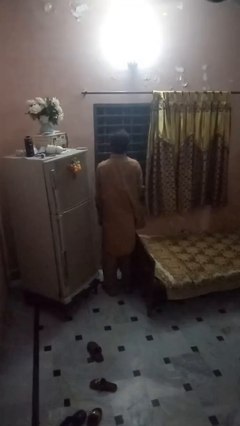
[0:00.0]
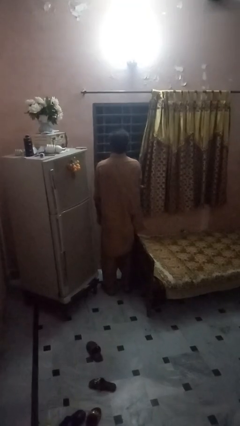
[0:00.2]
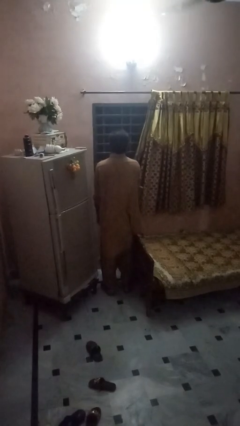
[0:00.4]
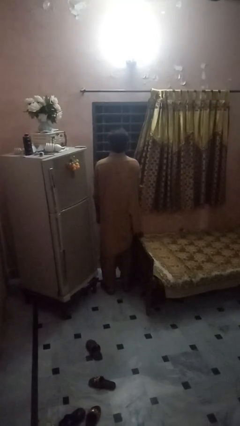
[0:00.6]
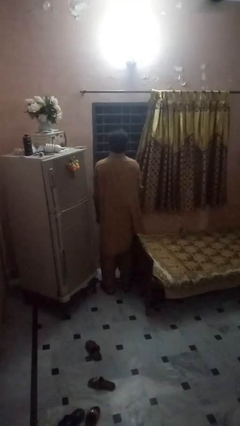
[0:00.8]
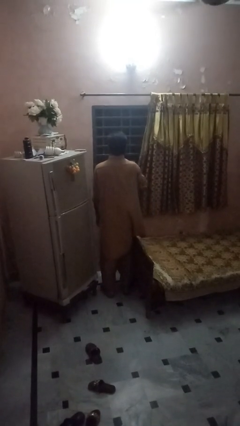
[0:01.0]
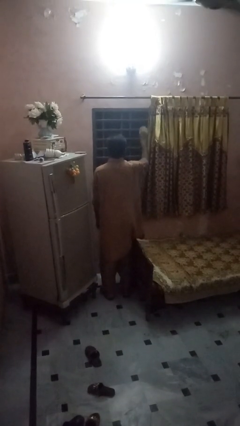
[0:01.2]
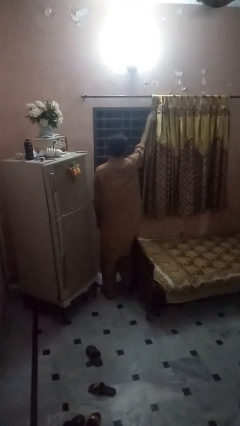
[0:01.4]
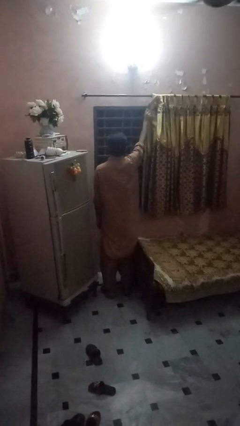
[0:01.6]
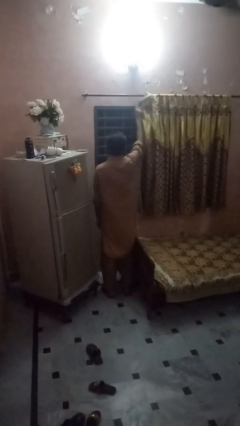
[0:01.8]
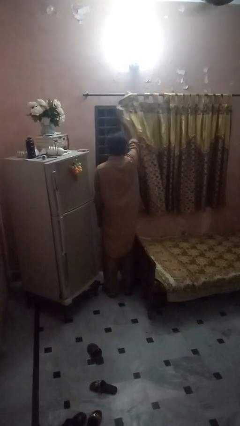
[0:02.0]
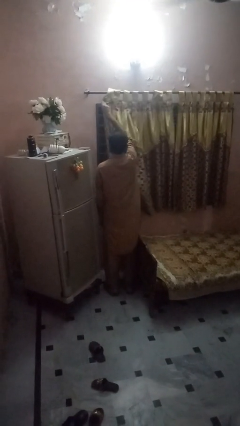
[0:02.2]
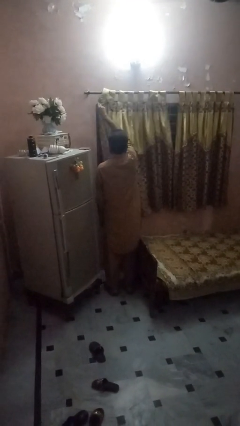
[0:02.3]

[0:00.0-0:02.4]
person closes curtains

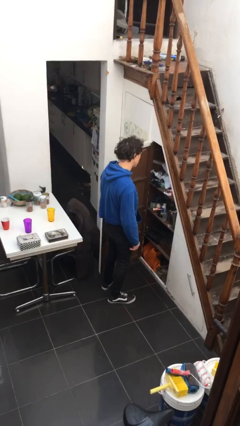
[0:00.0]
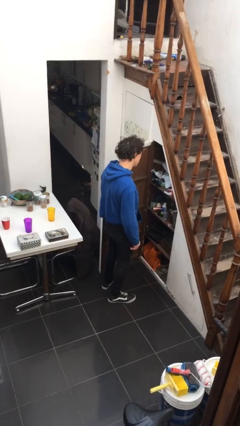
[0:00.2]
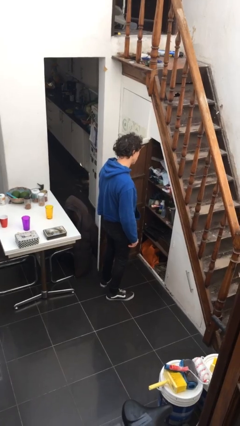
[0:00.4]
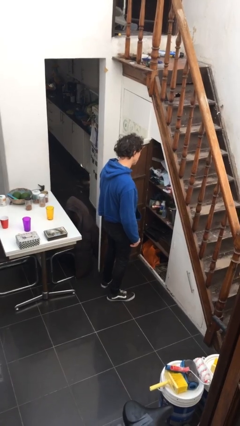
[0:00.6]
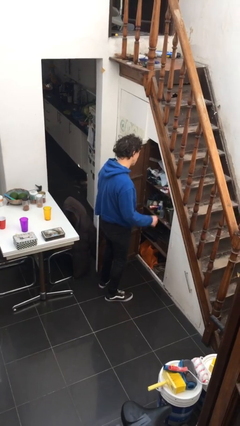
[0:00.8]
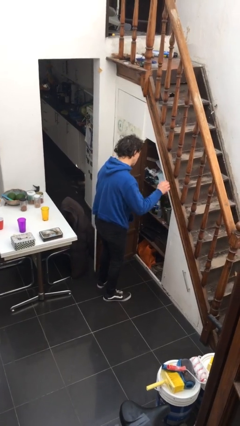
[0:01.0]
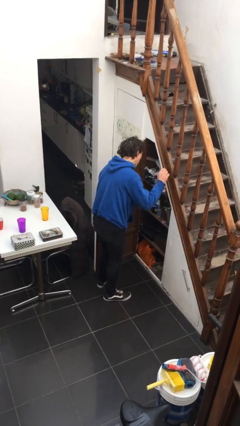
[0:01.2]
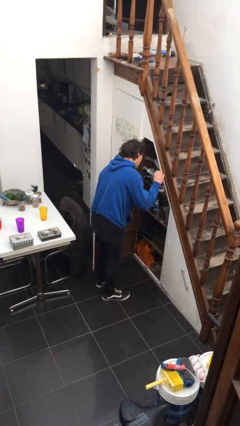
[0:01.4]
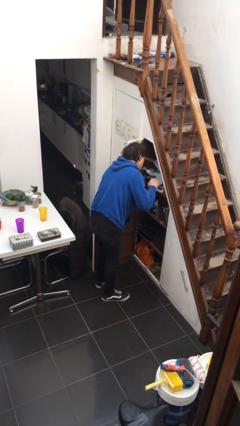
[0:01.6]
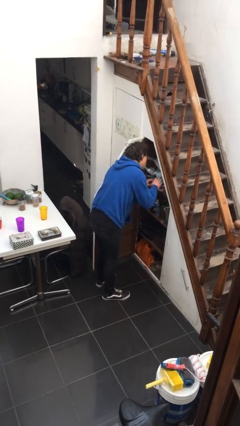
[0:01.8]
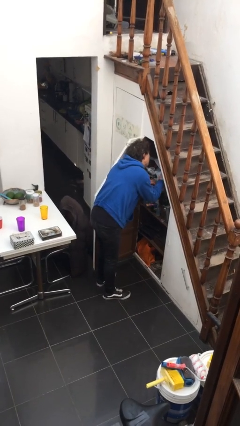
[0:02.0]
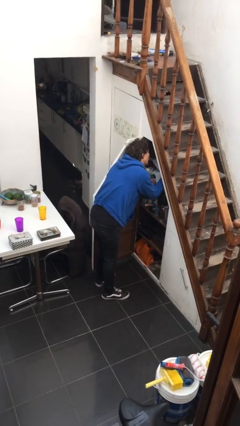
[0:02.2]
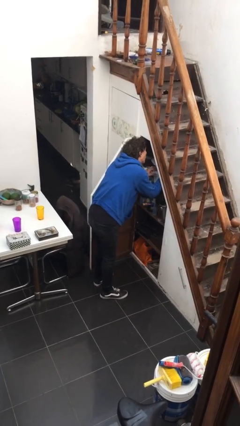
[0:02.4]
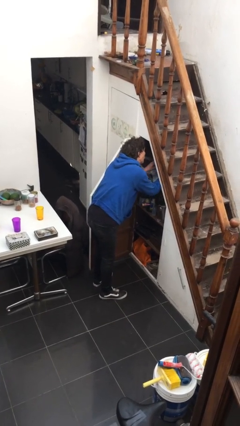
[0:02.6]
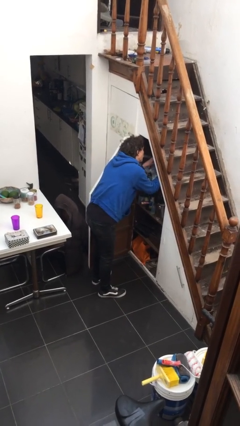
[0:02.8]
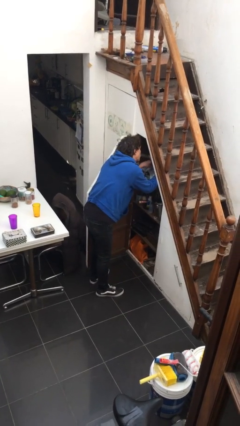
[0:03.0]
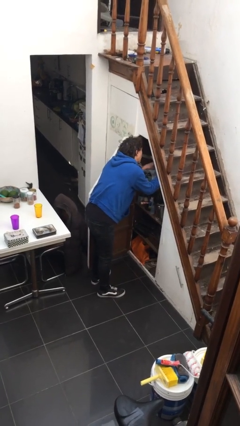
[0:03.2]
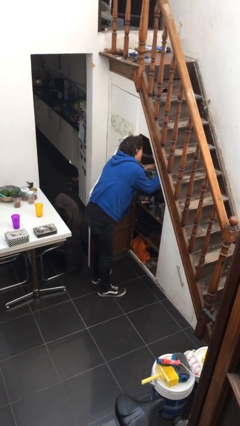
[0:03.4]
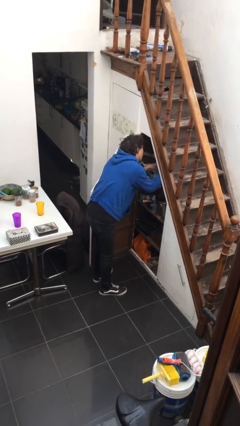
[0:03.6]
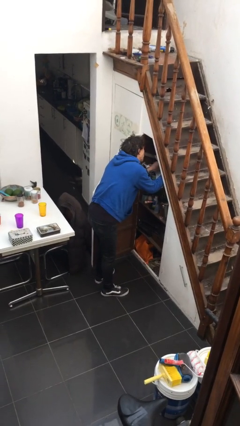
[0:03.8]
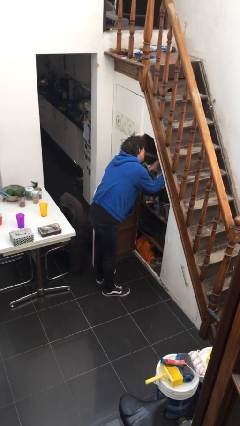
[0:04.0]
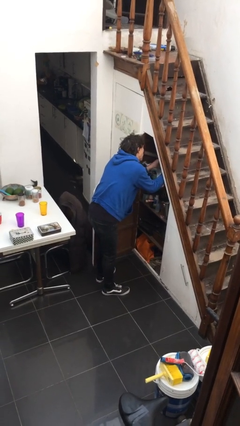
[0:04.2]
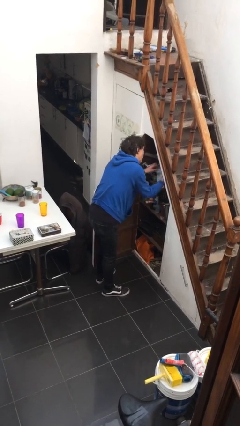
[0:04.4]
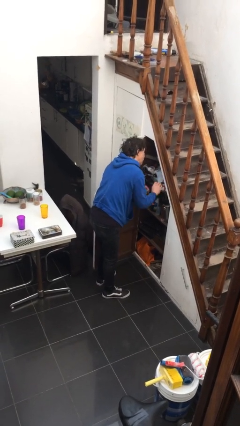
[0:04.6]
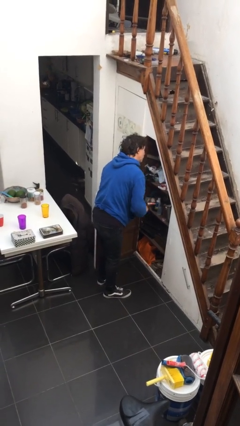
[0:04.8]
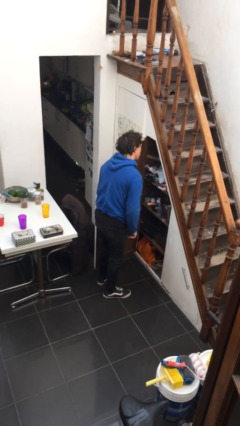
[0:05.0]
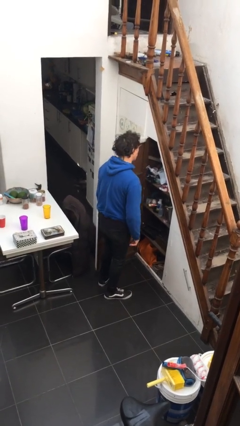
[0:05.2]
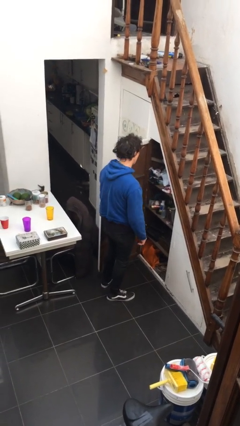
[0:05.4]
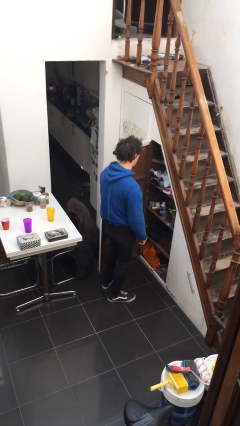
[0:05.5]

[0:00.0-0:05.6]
person searches in cabinet

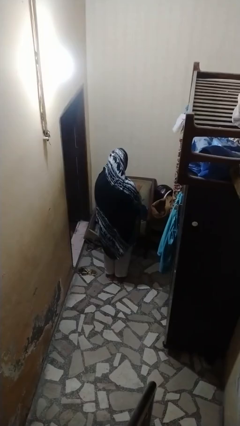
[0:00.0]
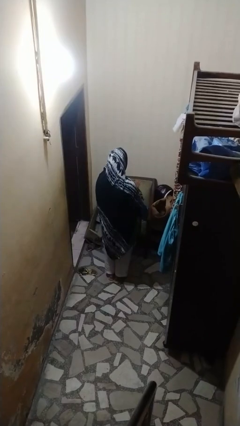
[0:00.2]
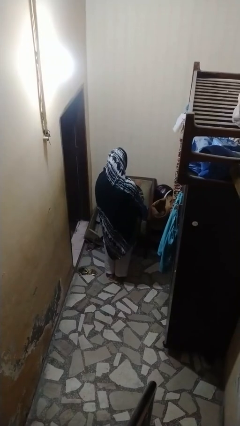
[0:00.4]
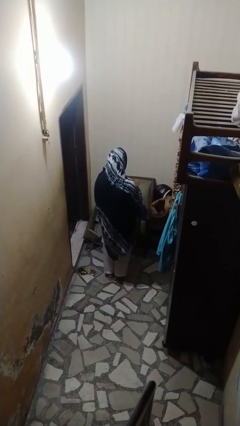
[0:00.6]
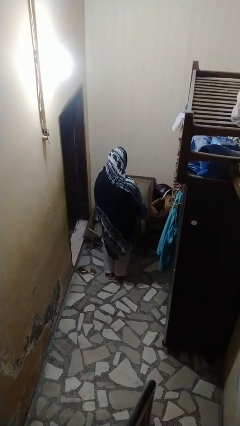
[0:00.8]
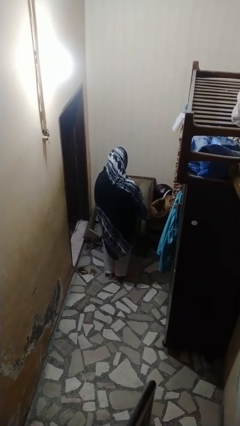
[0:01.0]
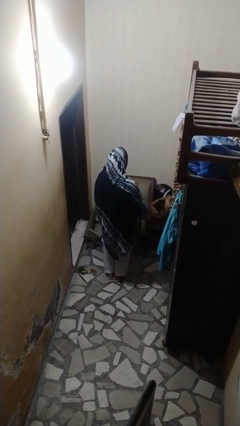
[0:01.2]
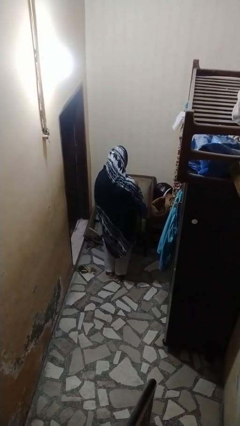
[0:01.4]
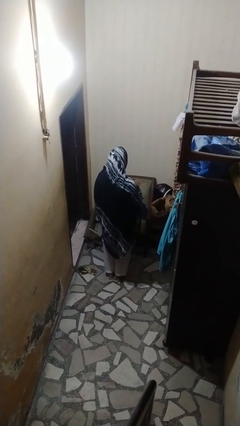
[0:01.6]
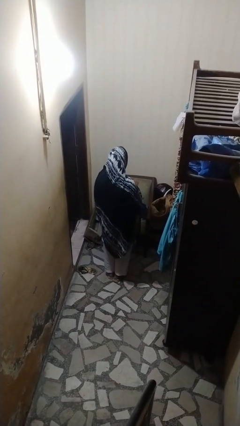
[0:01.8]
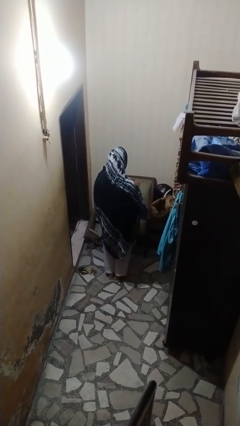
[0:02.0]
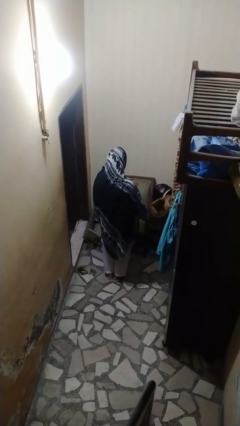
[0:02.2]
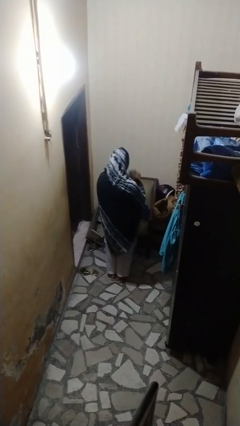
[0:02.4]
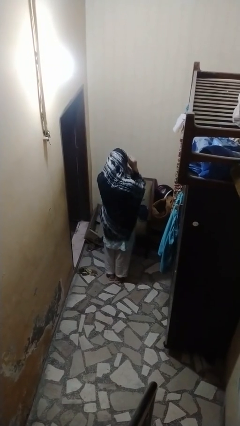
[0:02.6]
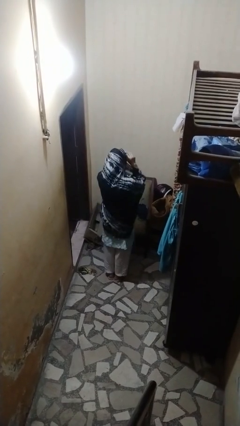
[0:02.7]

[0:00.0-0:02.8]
person stirs mug

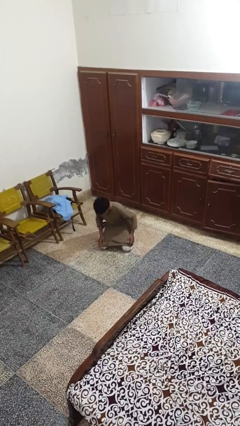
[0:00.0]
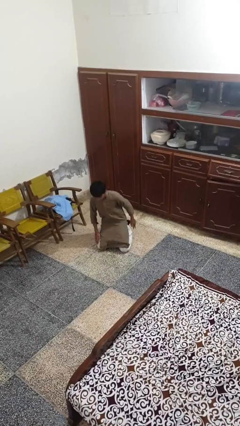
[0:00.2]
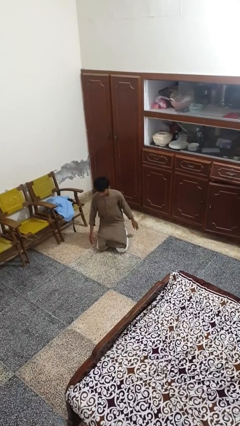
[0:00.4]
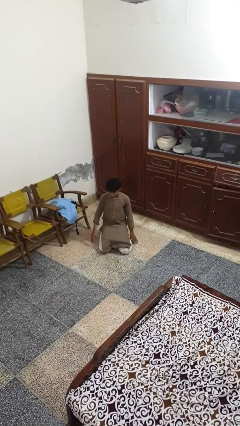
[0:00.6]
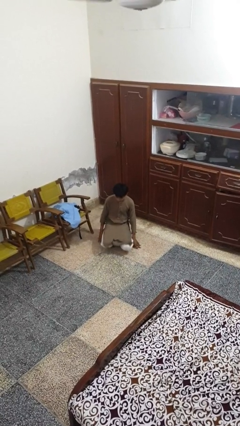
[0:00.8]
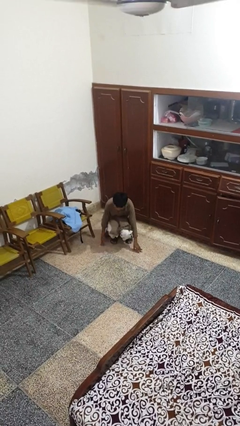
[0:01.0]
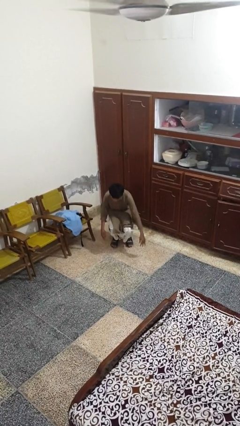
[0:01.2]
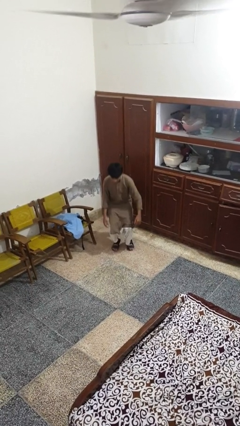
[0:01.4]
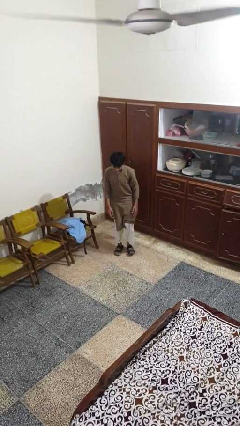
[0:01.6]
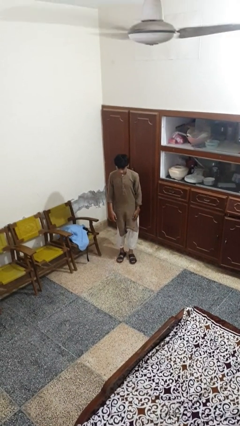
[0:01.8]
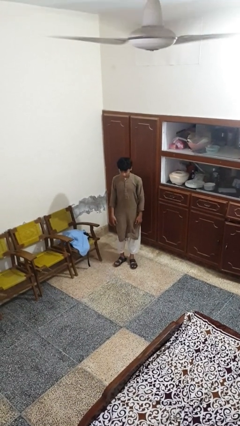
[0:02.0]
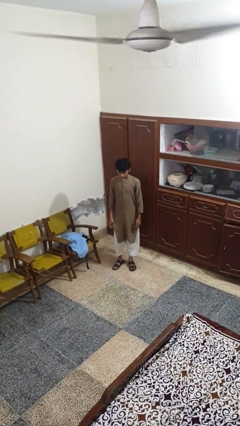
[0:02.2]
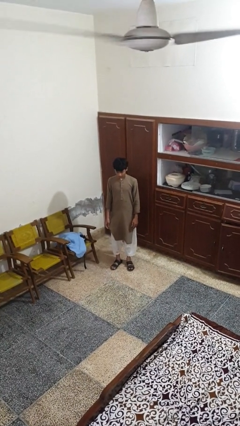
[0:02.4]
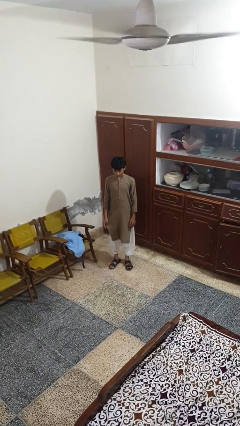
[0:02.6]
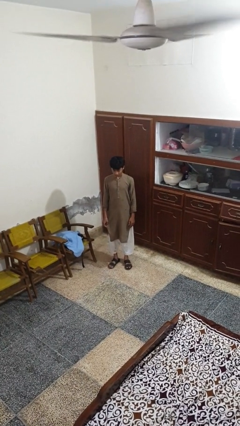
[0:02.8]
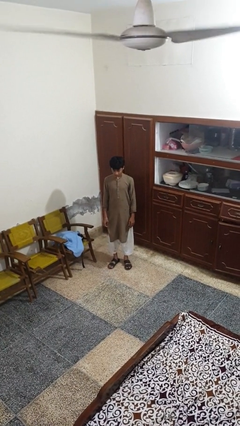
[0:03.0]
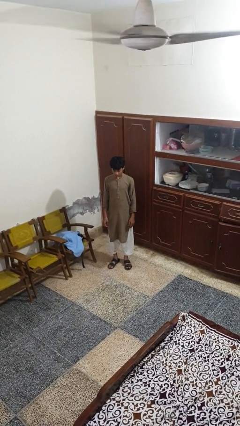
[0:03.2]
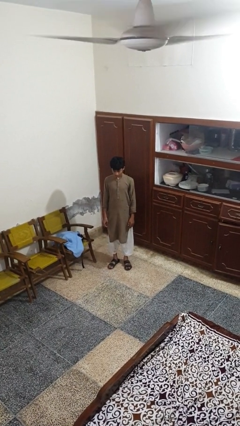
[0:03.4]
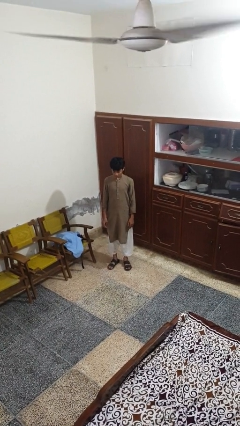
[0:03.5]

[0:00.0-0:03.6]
person stands up from floor

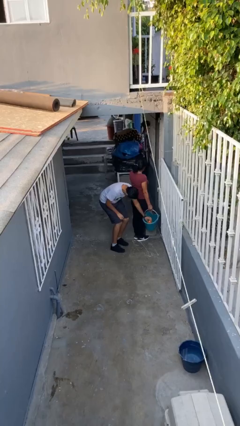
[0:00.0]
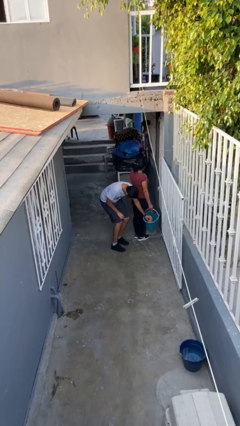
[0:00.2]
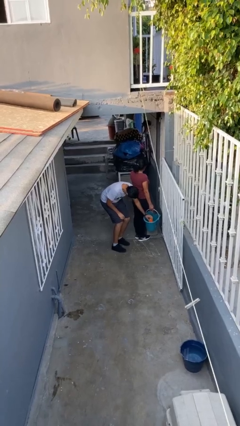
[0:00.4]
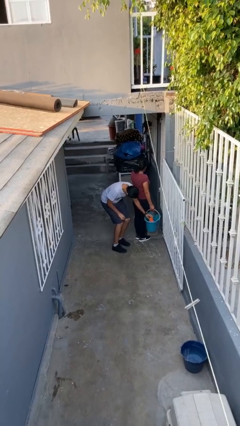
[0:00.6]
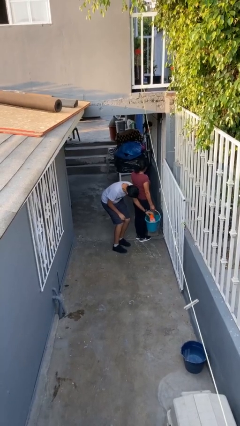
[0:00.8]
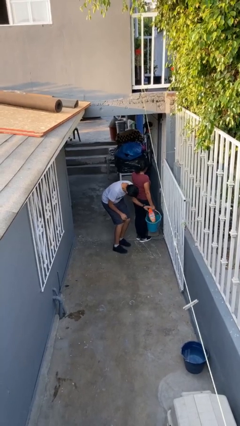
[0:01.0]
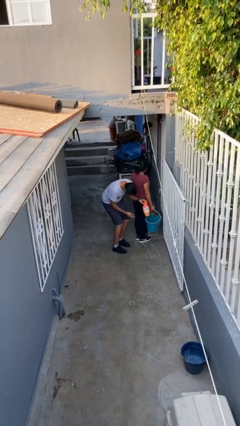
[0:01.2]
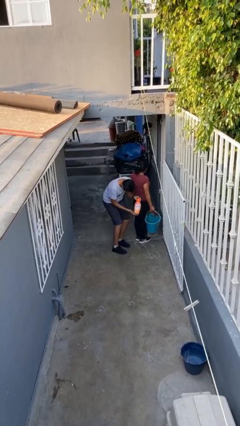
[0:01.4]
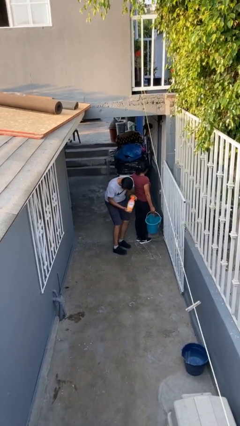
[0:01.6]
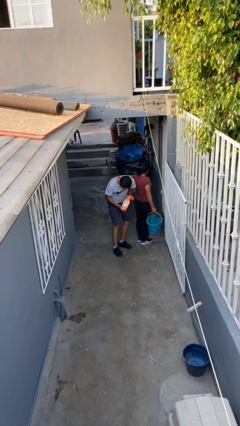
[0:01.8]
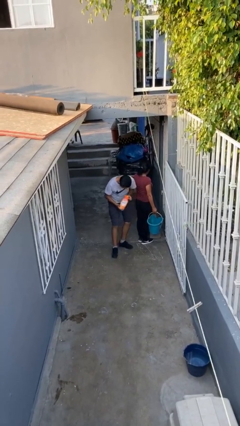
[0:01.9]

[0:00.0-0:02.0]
person steals object from person

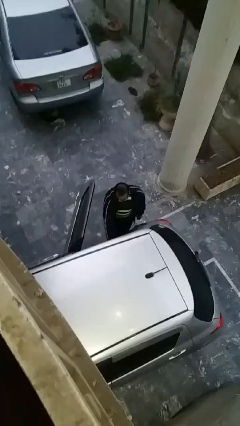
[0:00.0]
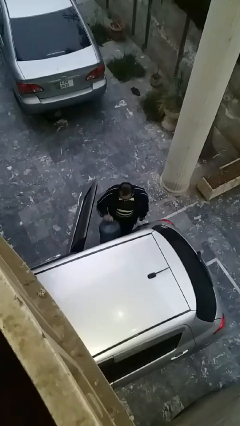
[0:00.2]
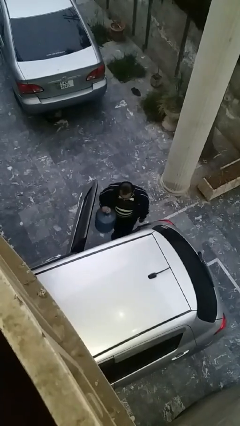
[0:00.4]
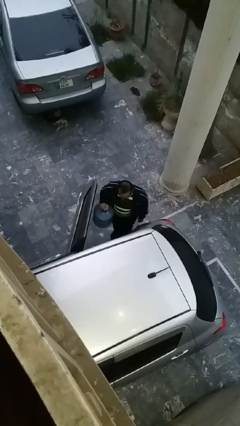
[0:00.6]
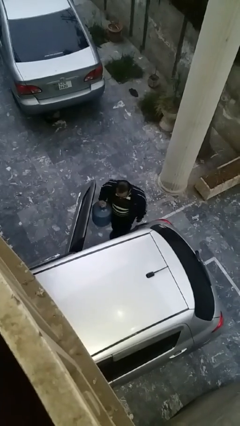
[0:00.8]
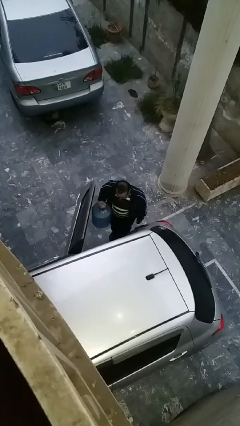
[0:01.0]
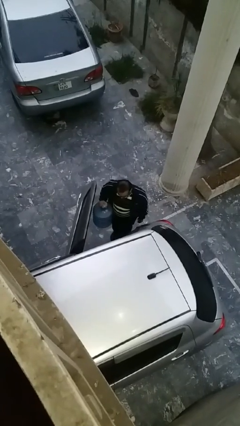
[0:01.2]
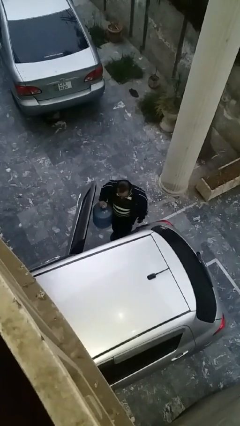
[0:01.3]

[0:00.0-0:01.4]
person unloads car
